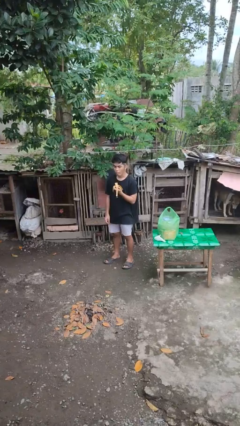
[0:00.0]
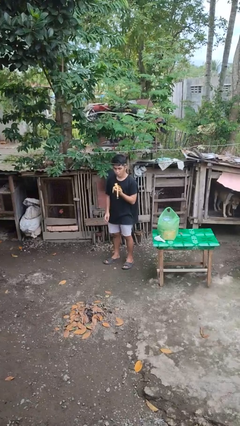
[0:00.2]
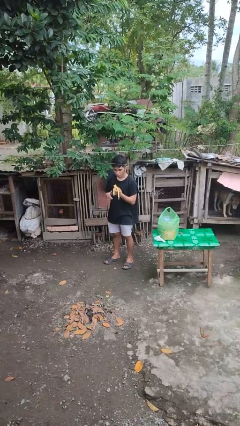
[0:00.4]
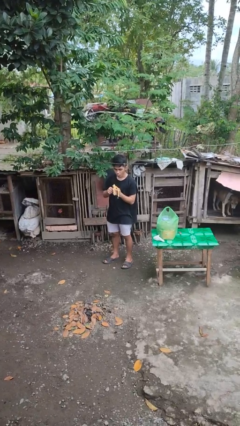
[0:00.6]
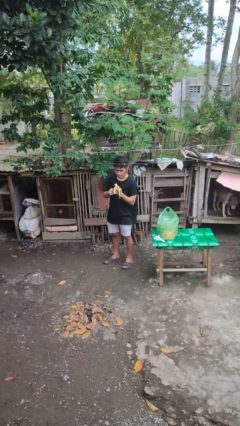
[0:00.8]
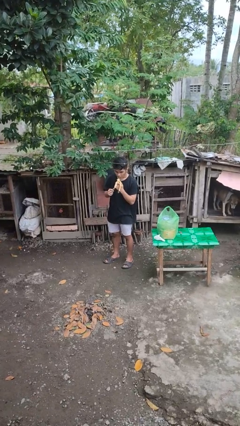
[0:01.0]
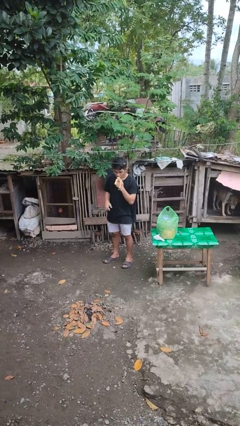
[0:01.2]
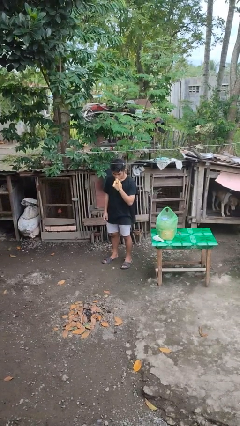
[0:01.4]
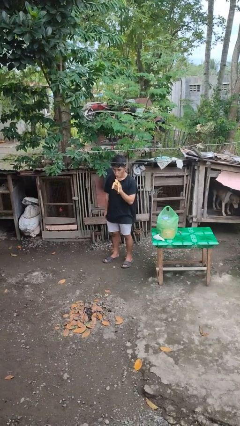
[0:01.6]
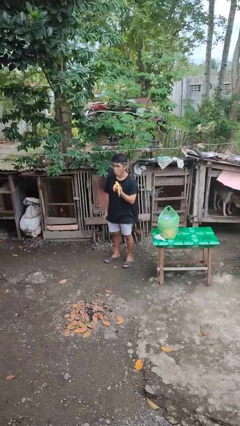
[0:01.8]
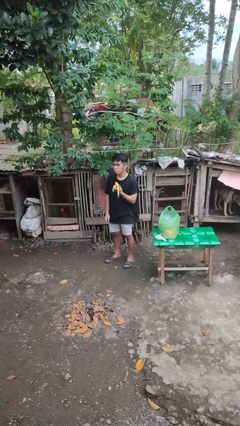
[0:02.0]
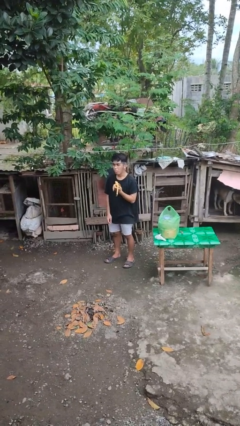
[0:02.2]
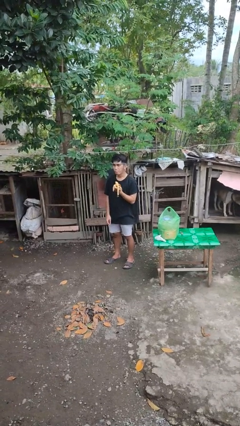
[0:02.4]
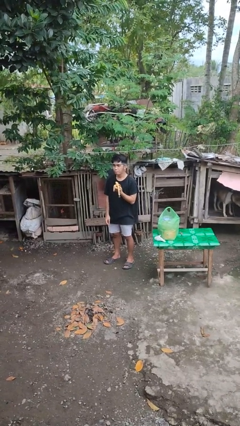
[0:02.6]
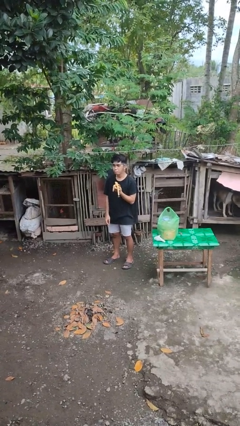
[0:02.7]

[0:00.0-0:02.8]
person eats banana

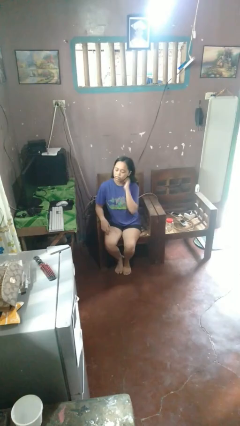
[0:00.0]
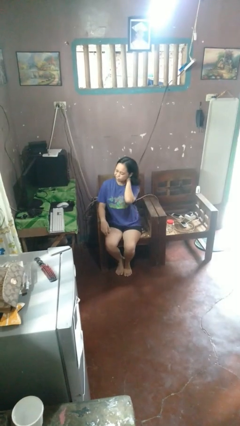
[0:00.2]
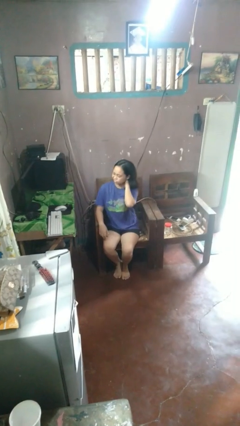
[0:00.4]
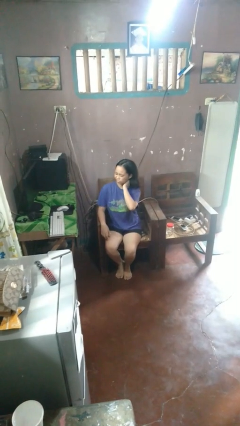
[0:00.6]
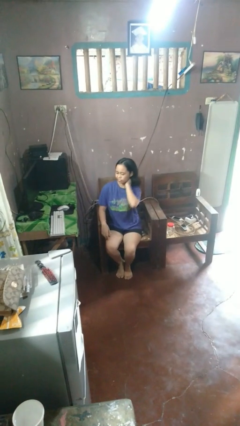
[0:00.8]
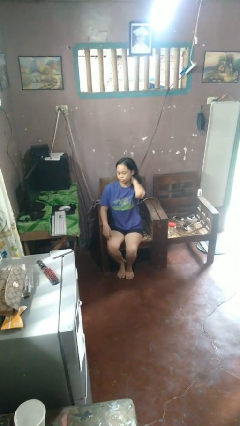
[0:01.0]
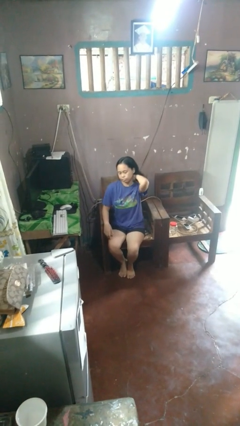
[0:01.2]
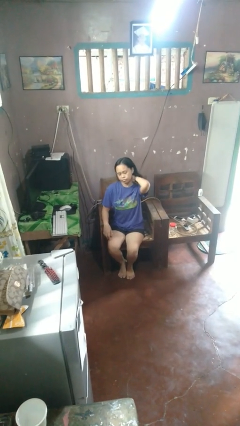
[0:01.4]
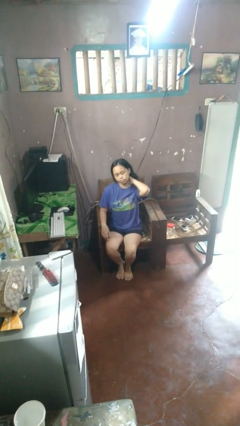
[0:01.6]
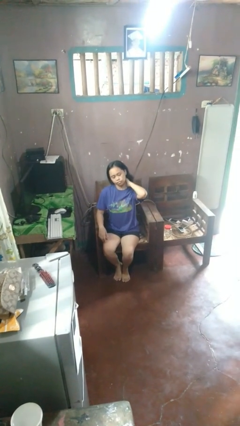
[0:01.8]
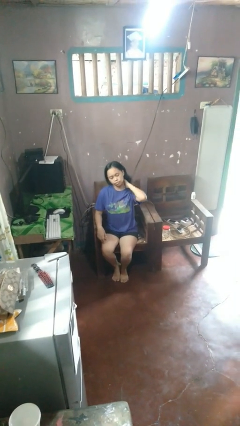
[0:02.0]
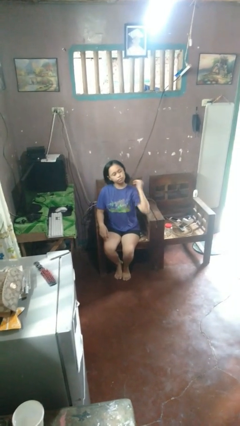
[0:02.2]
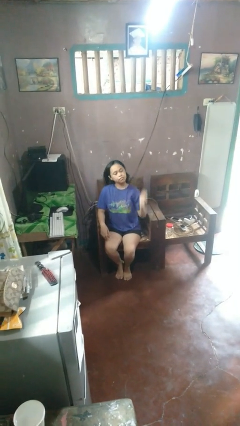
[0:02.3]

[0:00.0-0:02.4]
person rubs neck

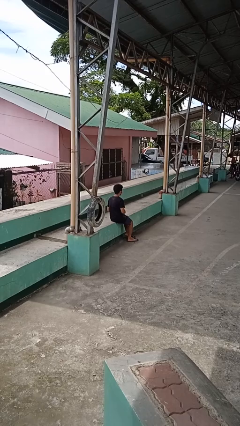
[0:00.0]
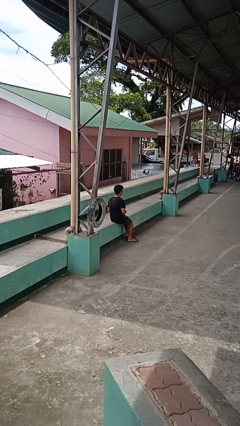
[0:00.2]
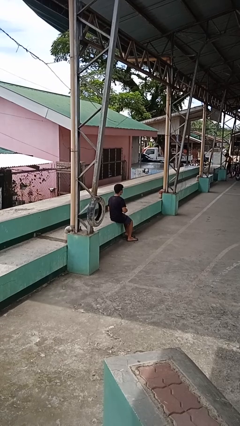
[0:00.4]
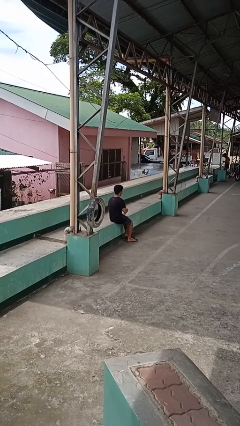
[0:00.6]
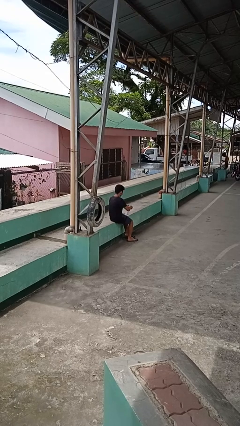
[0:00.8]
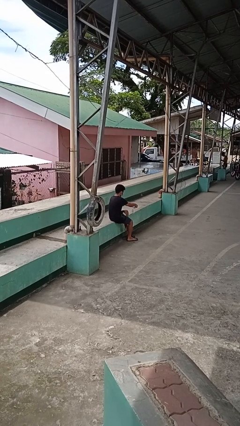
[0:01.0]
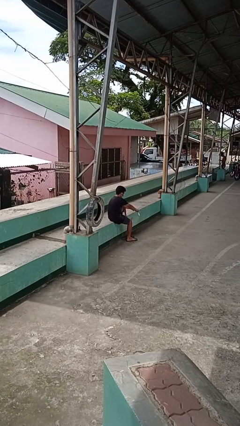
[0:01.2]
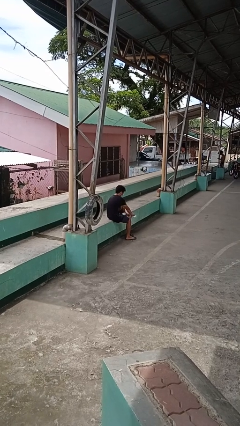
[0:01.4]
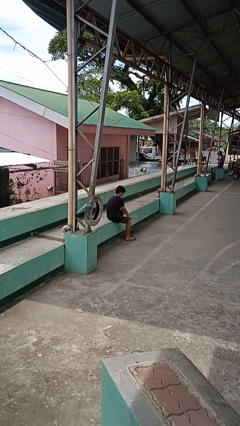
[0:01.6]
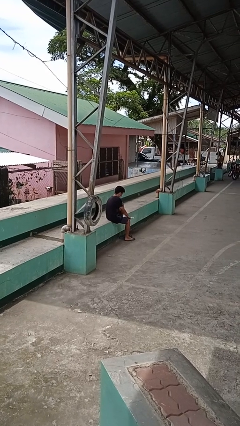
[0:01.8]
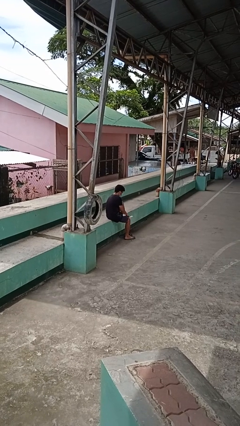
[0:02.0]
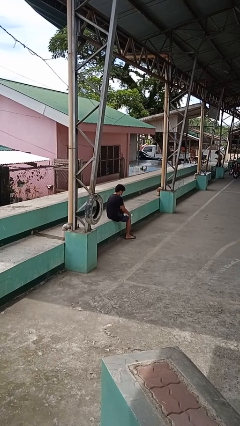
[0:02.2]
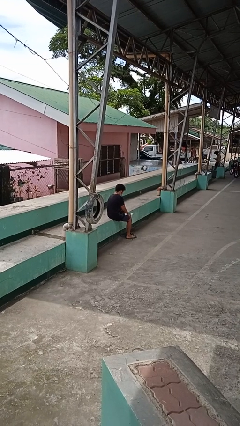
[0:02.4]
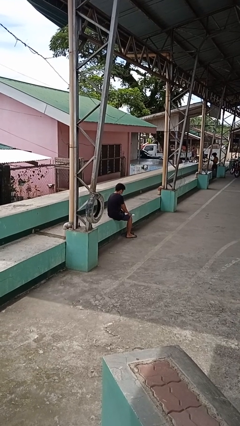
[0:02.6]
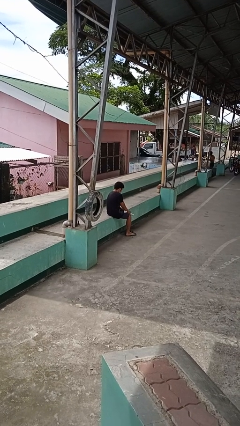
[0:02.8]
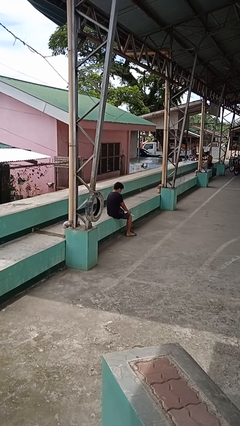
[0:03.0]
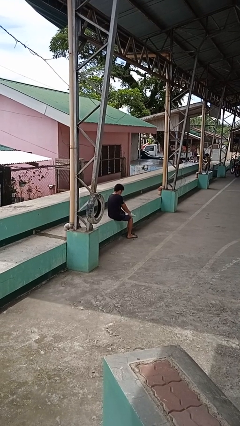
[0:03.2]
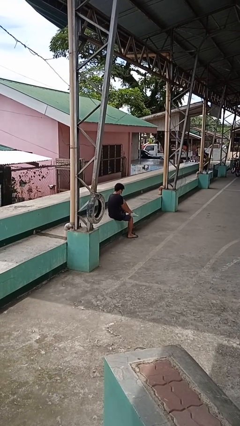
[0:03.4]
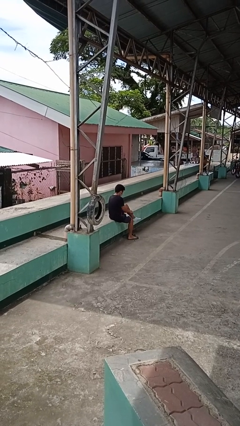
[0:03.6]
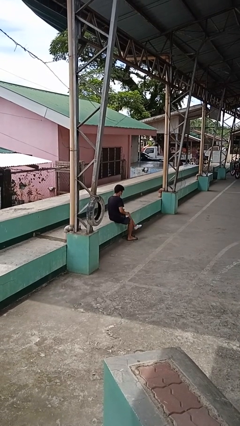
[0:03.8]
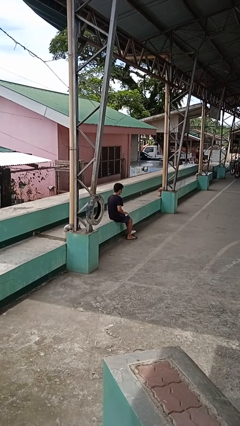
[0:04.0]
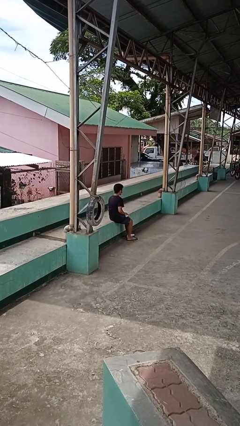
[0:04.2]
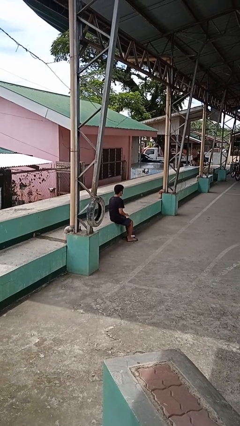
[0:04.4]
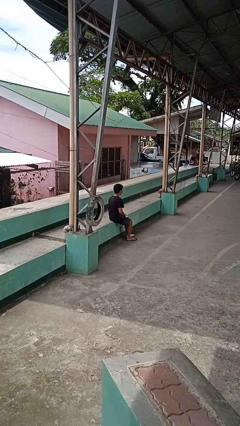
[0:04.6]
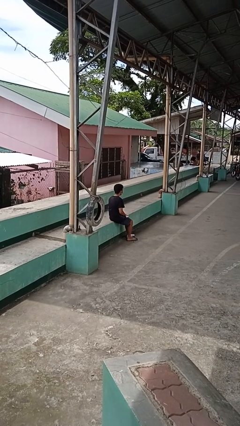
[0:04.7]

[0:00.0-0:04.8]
person puts on socks

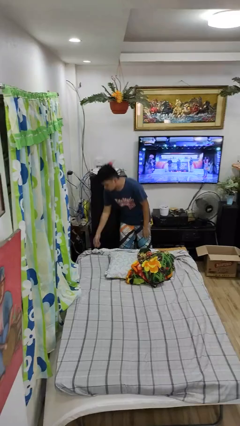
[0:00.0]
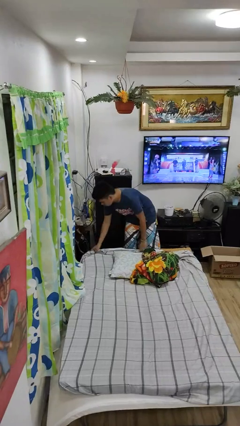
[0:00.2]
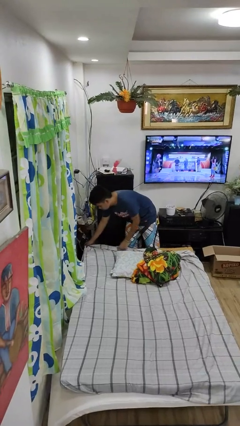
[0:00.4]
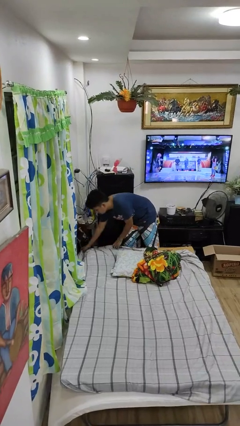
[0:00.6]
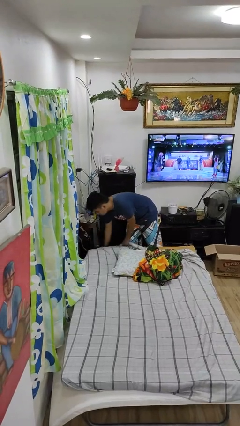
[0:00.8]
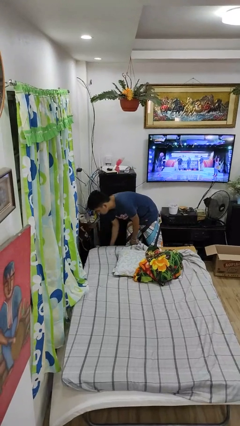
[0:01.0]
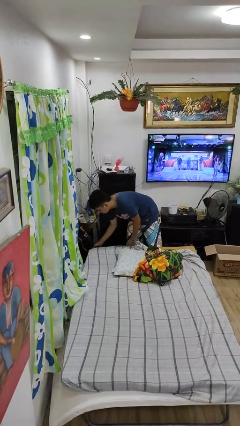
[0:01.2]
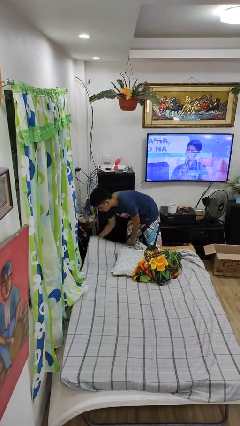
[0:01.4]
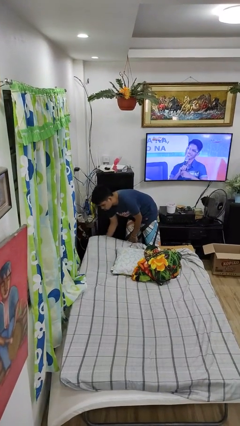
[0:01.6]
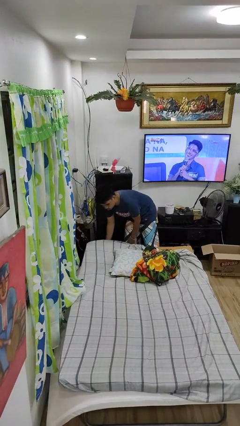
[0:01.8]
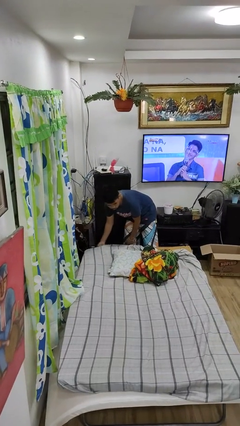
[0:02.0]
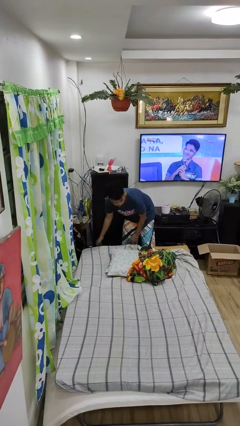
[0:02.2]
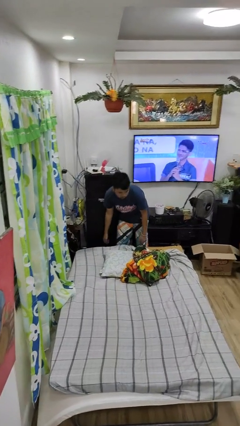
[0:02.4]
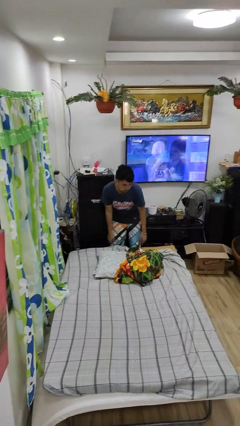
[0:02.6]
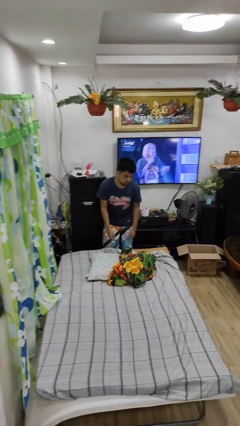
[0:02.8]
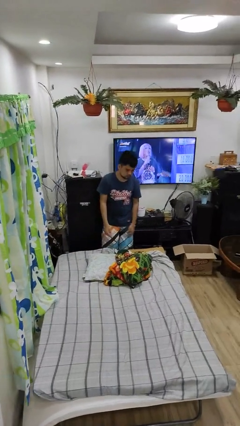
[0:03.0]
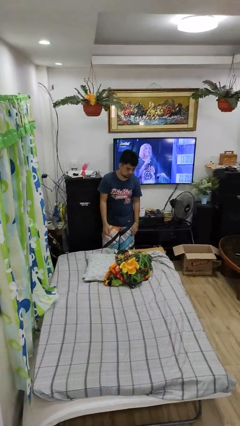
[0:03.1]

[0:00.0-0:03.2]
person makes bed

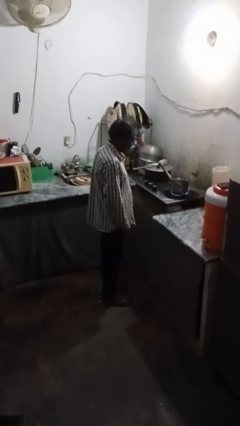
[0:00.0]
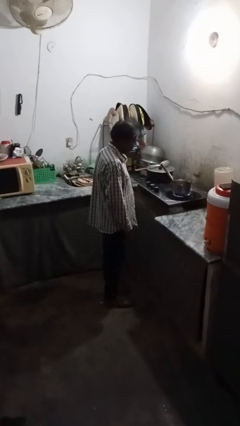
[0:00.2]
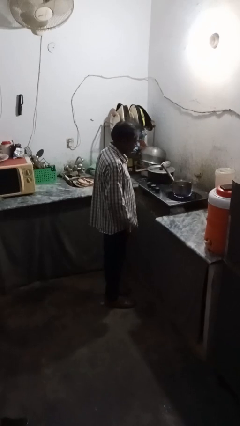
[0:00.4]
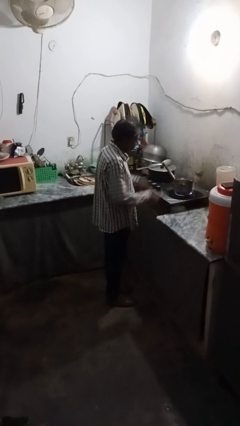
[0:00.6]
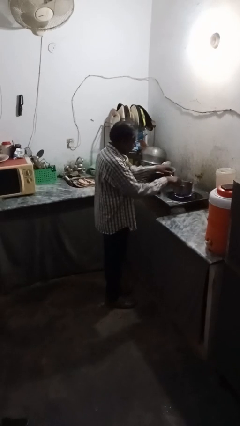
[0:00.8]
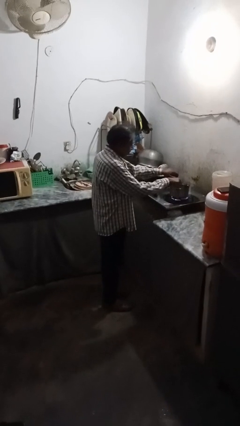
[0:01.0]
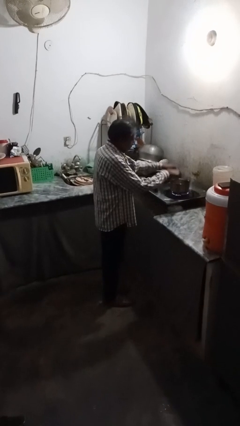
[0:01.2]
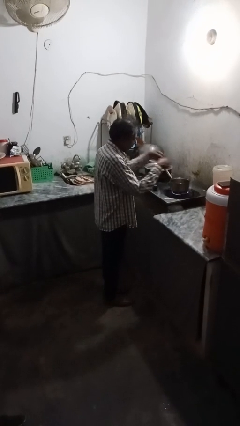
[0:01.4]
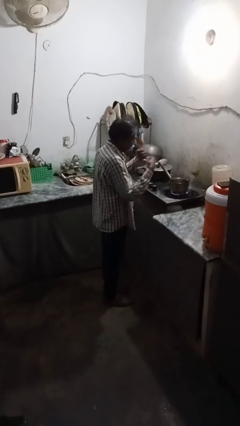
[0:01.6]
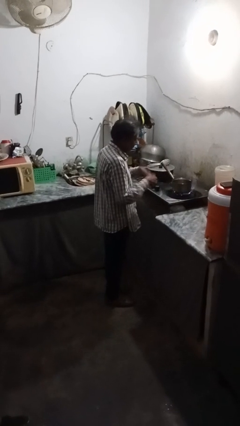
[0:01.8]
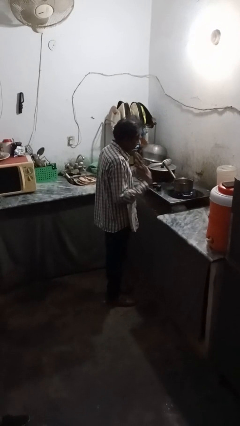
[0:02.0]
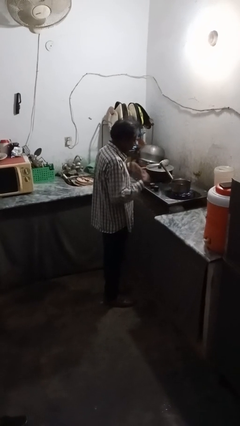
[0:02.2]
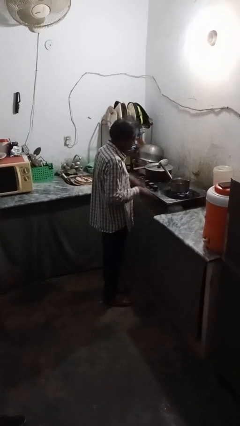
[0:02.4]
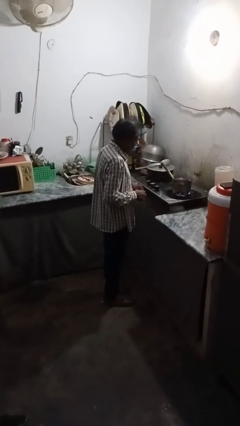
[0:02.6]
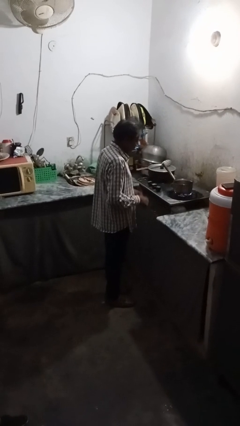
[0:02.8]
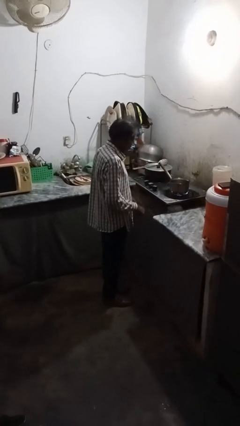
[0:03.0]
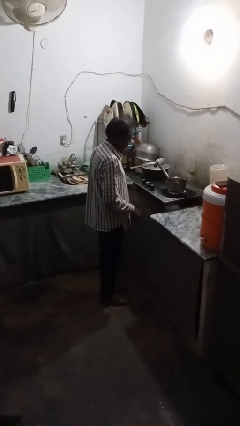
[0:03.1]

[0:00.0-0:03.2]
person burns hand

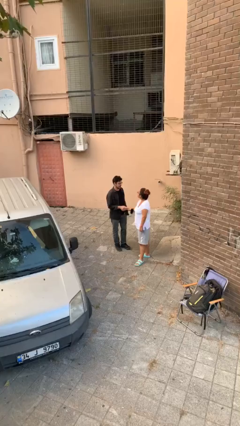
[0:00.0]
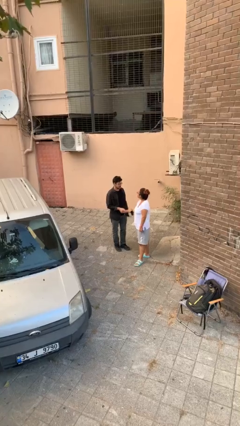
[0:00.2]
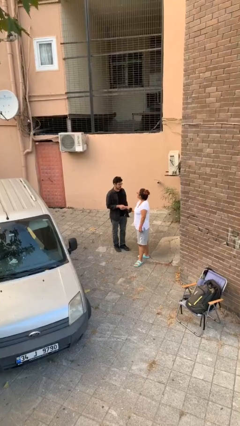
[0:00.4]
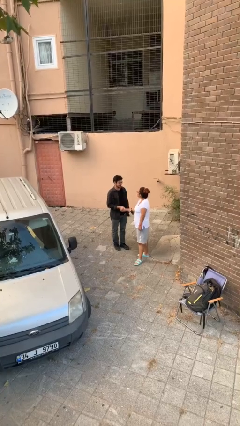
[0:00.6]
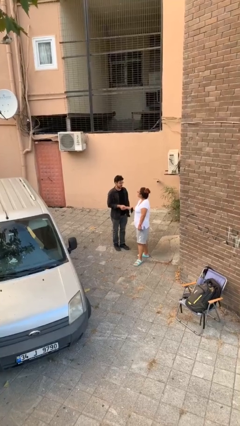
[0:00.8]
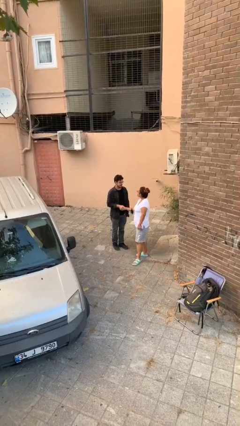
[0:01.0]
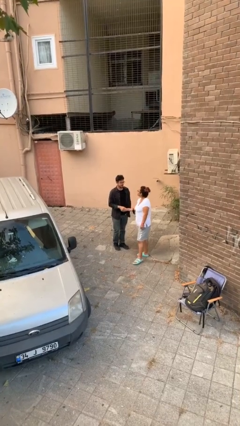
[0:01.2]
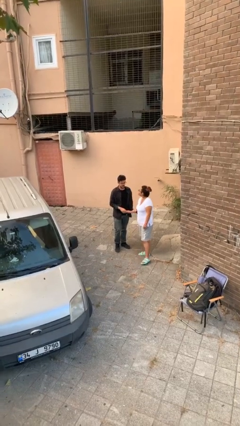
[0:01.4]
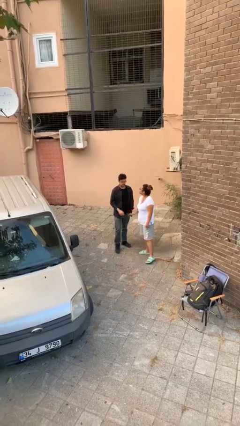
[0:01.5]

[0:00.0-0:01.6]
person shakes hand
